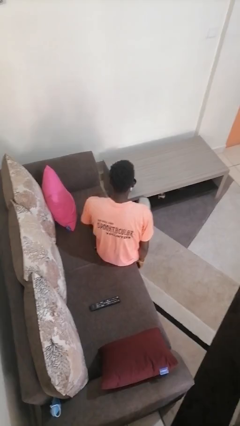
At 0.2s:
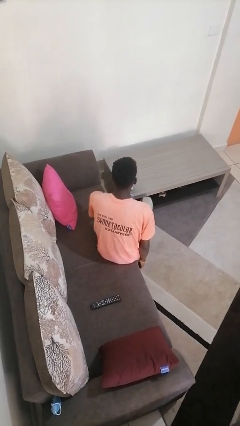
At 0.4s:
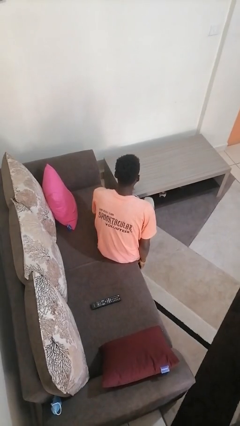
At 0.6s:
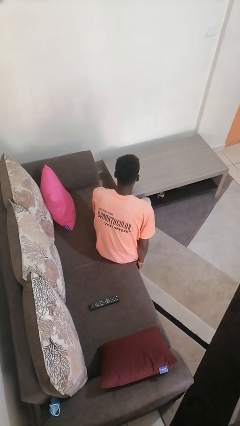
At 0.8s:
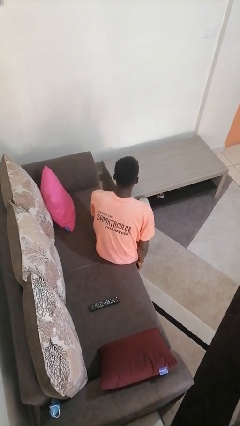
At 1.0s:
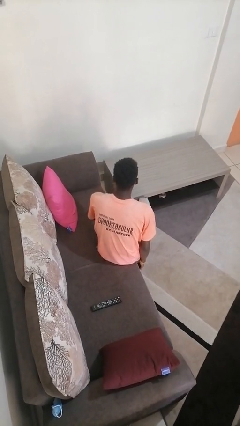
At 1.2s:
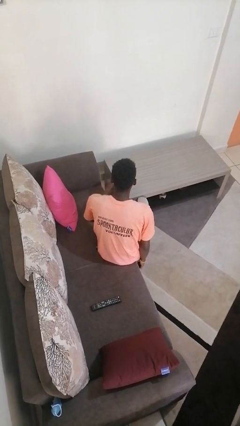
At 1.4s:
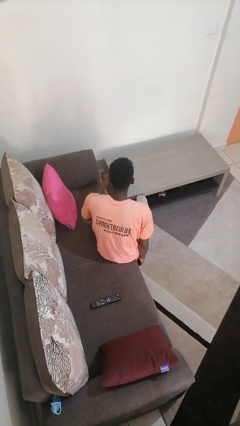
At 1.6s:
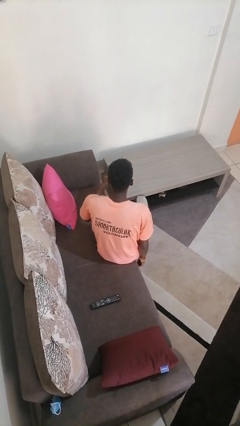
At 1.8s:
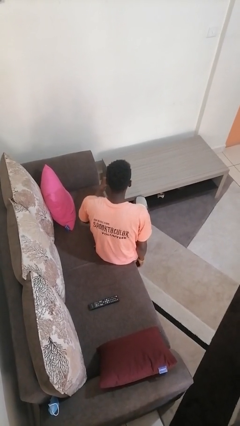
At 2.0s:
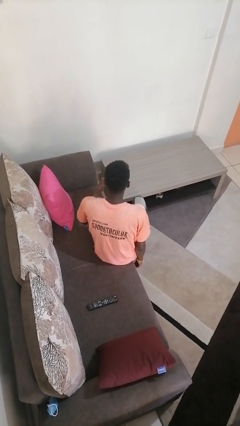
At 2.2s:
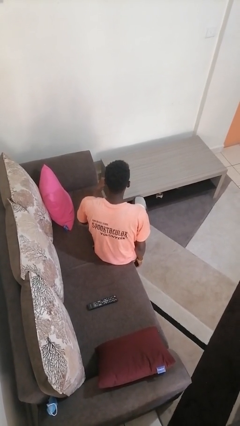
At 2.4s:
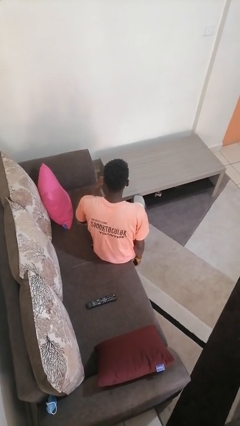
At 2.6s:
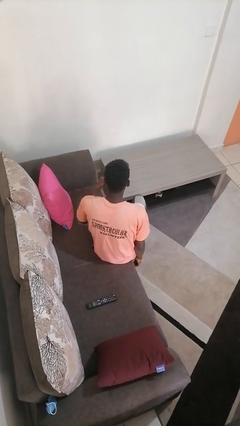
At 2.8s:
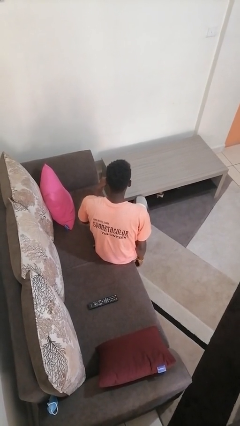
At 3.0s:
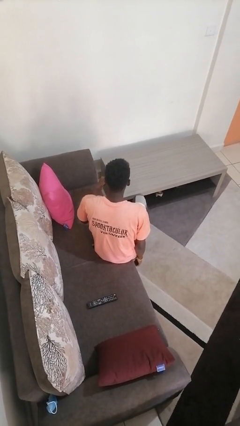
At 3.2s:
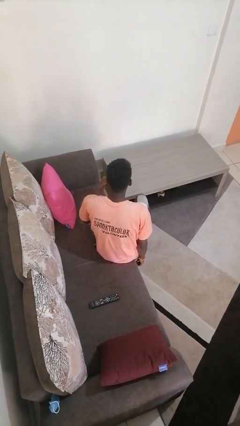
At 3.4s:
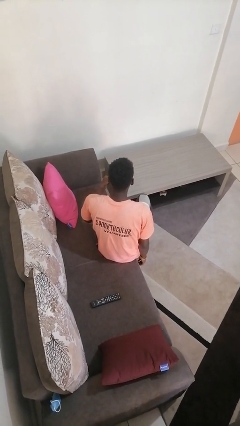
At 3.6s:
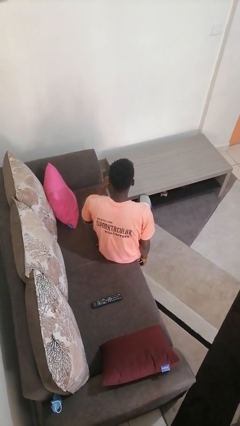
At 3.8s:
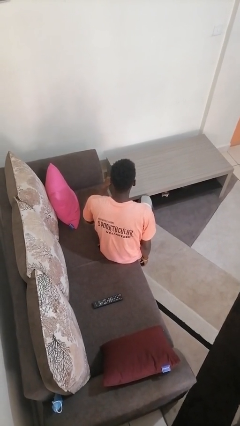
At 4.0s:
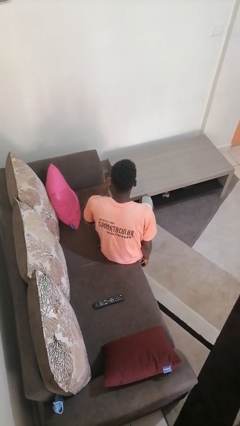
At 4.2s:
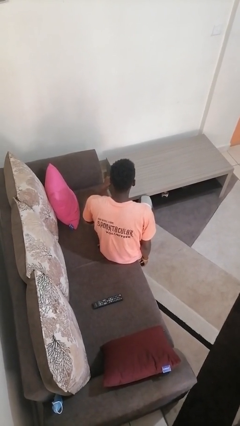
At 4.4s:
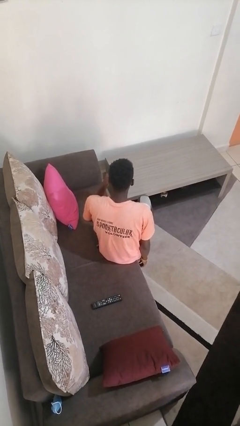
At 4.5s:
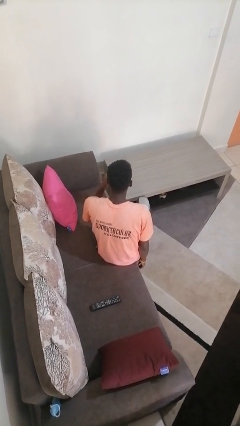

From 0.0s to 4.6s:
person picks up object from table

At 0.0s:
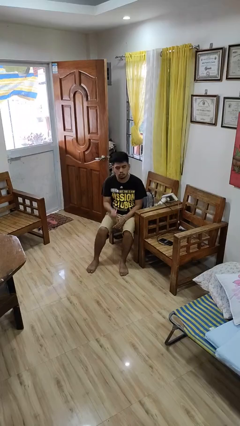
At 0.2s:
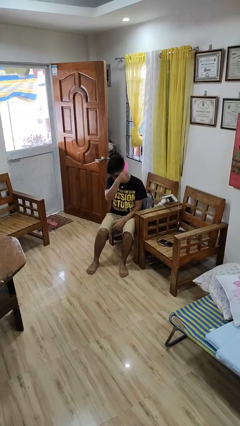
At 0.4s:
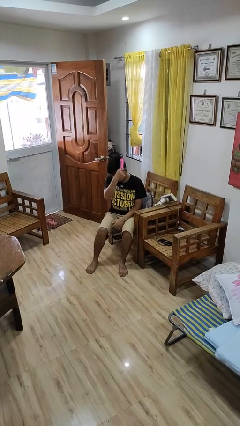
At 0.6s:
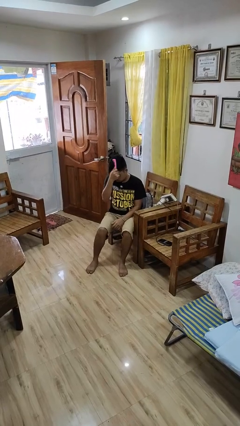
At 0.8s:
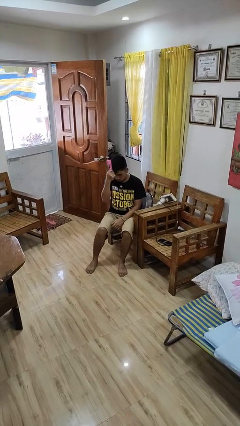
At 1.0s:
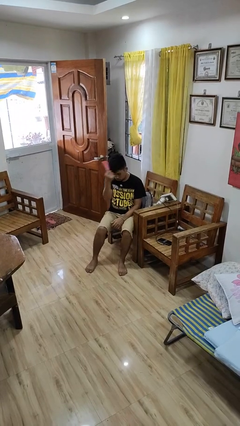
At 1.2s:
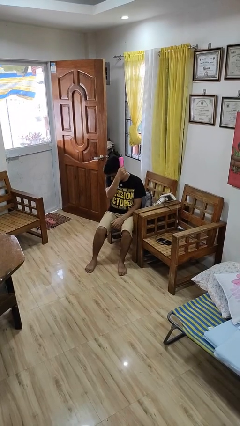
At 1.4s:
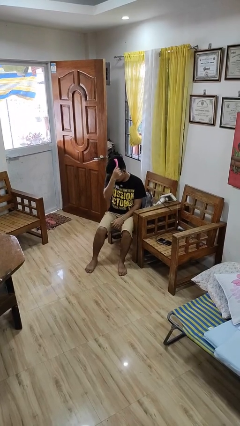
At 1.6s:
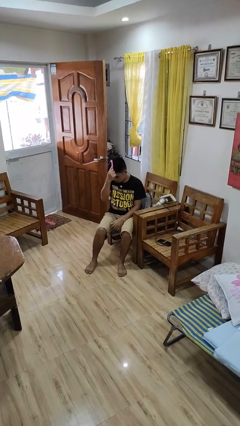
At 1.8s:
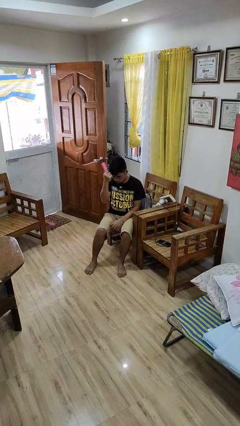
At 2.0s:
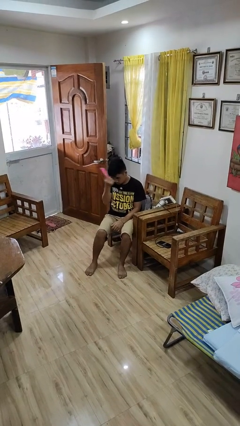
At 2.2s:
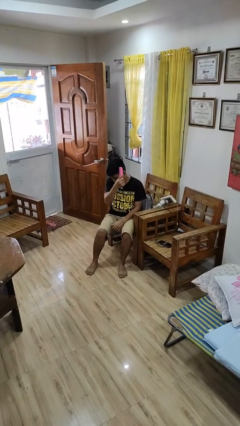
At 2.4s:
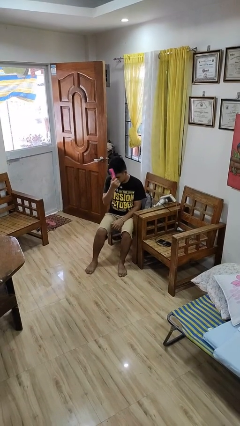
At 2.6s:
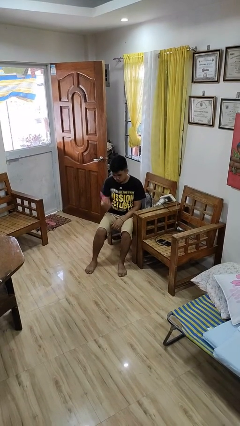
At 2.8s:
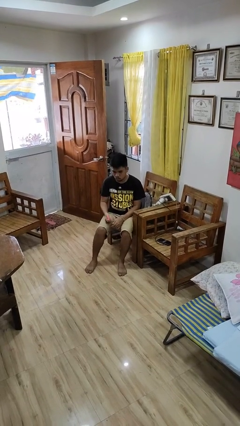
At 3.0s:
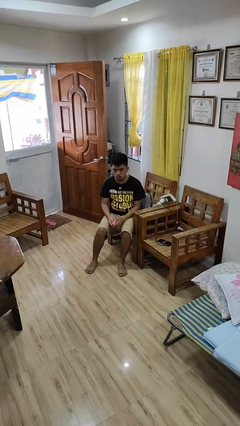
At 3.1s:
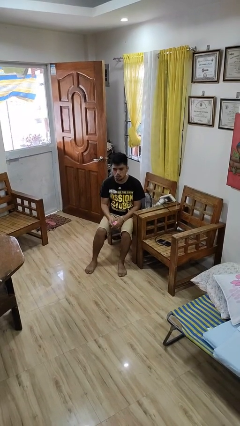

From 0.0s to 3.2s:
person brushes hair

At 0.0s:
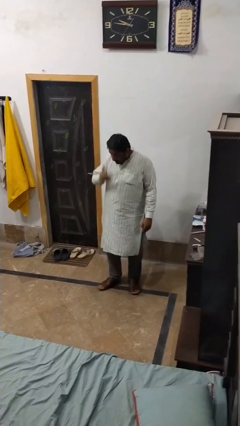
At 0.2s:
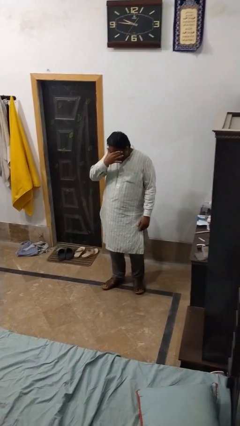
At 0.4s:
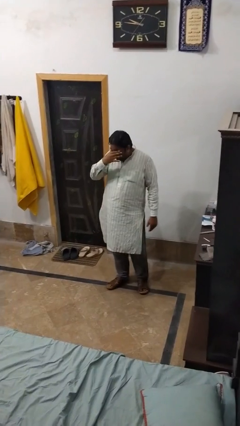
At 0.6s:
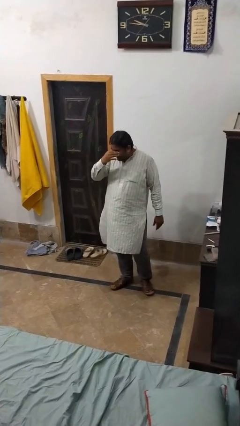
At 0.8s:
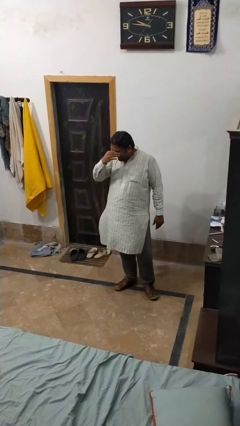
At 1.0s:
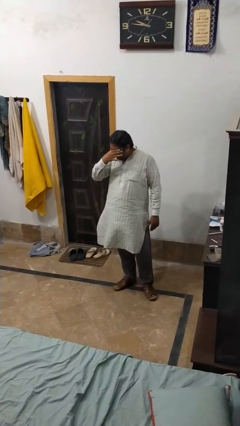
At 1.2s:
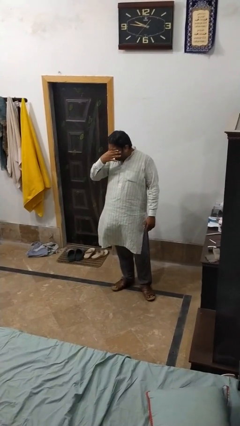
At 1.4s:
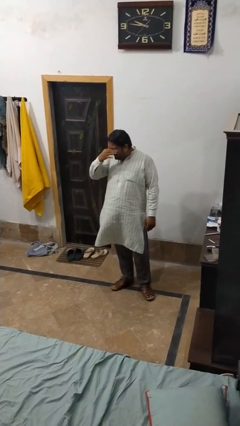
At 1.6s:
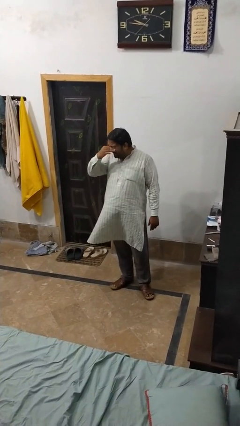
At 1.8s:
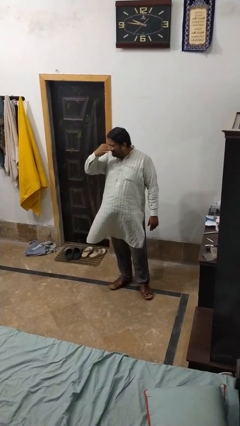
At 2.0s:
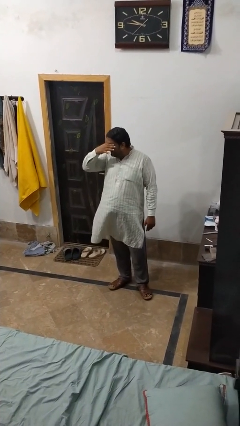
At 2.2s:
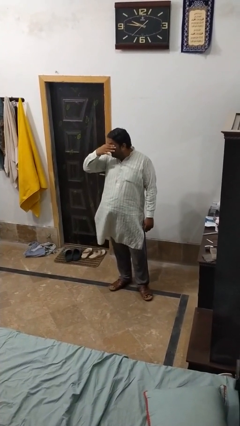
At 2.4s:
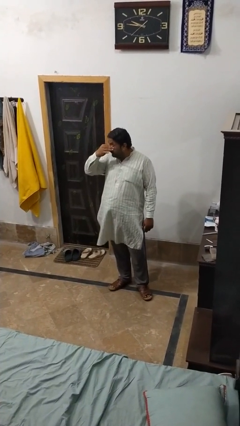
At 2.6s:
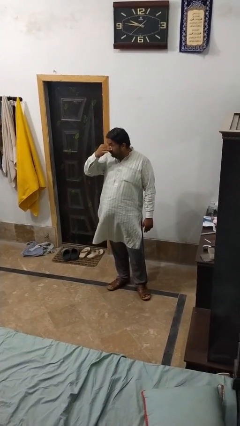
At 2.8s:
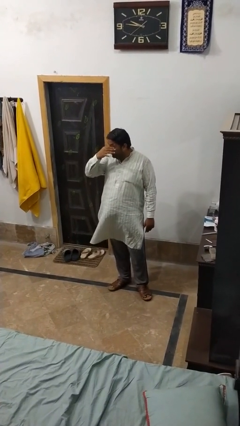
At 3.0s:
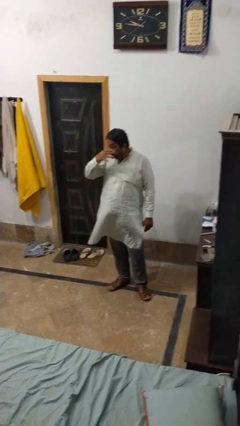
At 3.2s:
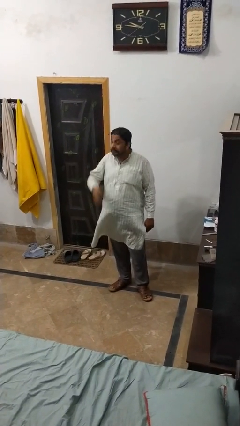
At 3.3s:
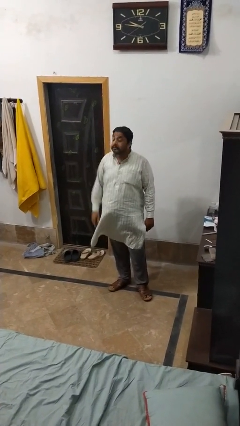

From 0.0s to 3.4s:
person rubs eyes

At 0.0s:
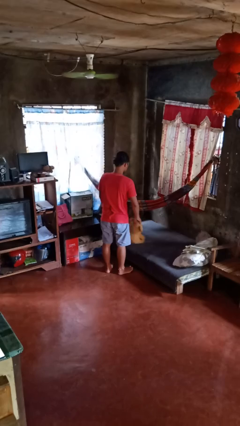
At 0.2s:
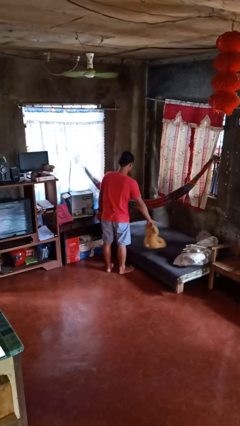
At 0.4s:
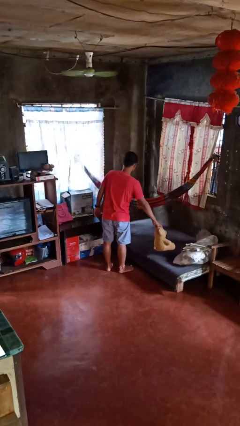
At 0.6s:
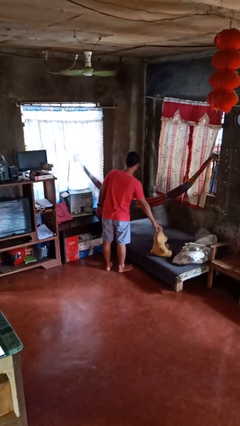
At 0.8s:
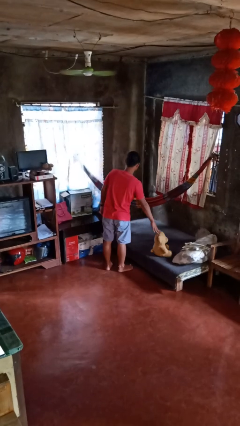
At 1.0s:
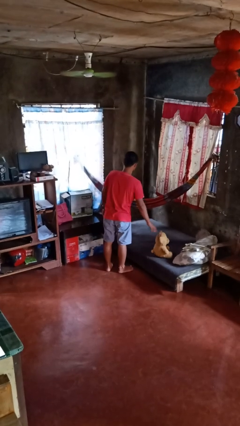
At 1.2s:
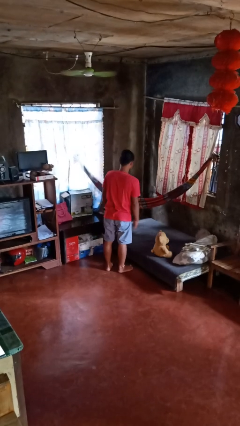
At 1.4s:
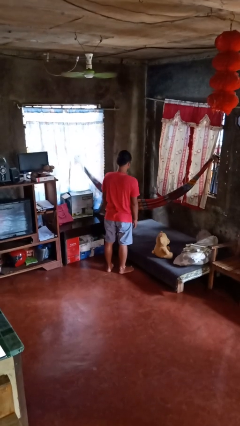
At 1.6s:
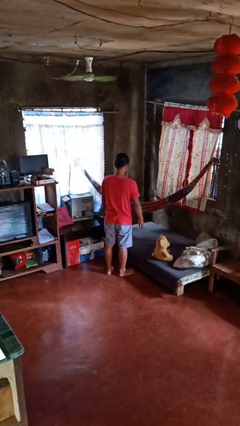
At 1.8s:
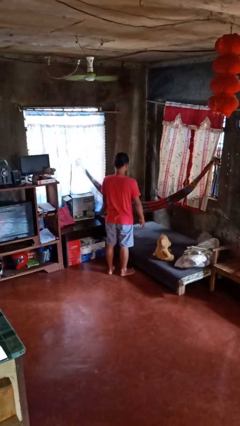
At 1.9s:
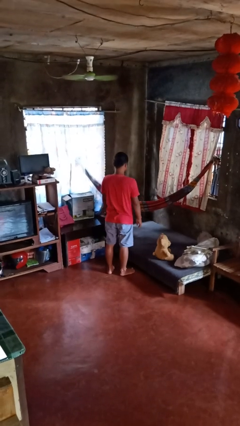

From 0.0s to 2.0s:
person puts down object on bed

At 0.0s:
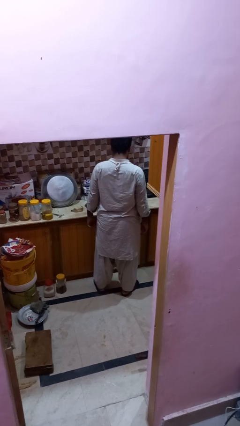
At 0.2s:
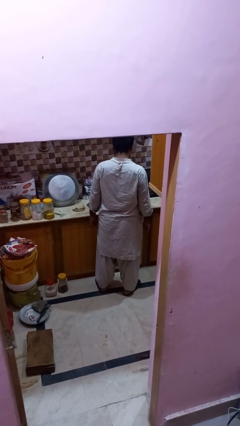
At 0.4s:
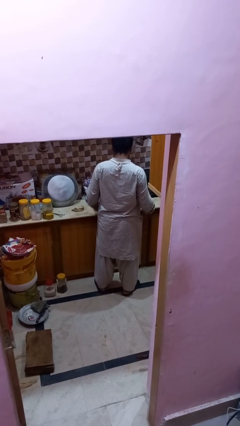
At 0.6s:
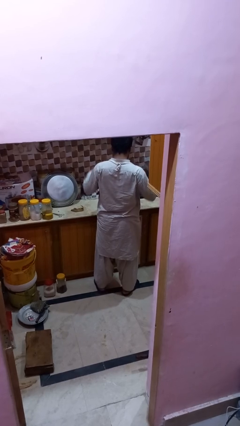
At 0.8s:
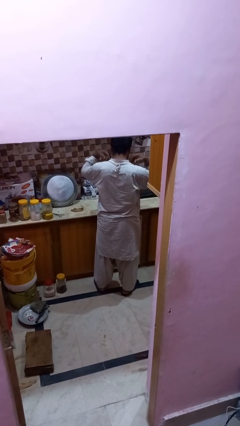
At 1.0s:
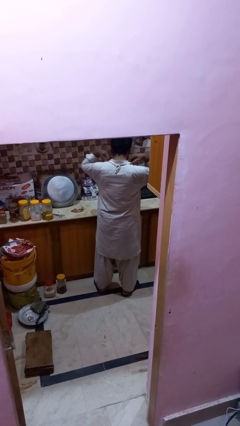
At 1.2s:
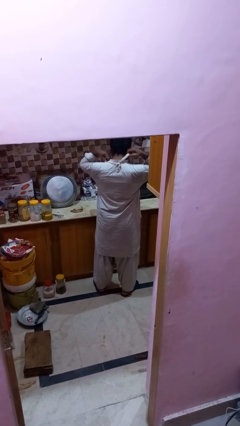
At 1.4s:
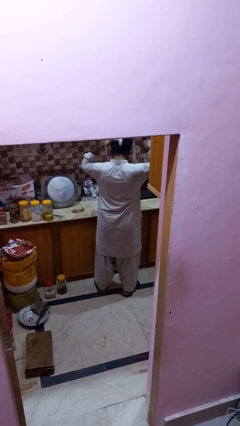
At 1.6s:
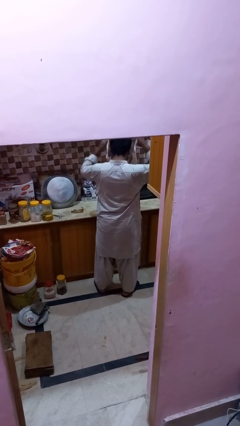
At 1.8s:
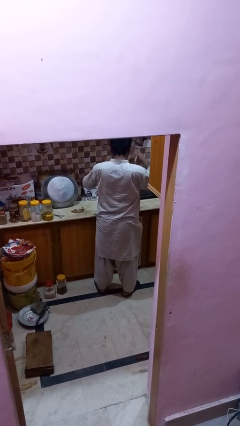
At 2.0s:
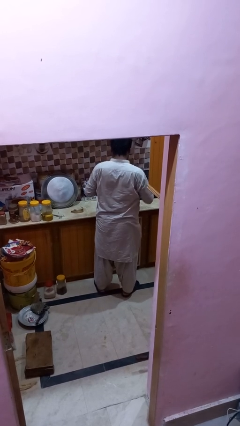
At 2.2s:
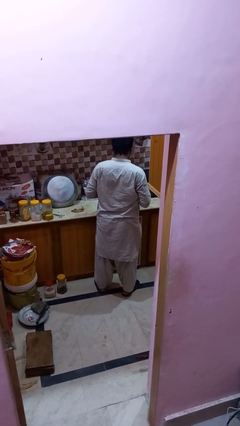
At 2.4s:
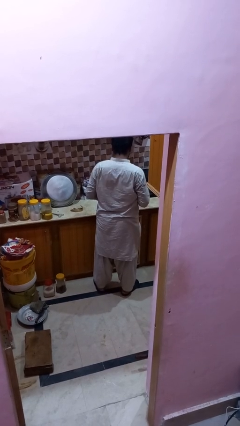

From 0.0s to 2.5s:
person takes off apron

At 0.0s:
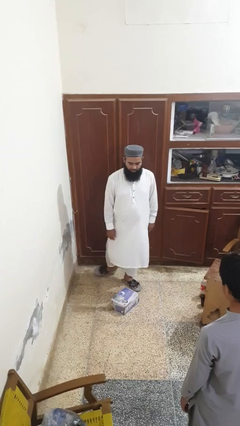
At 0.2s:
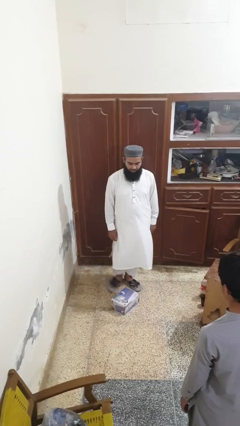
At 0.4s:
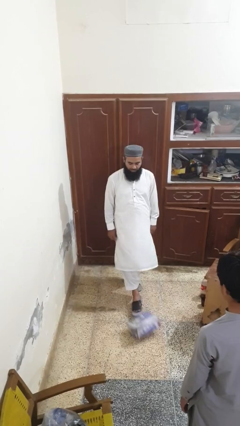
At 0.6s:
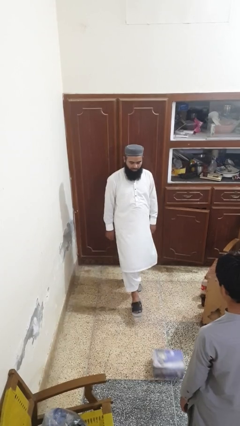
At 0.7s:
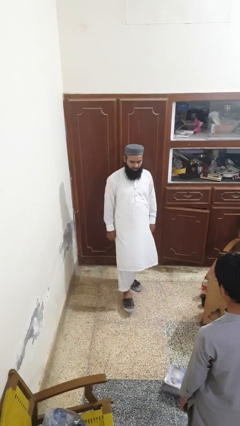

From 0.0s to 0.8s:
person kicks object to person

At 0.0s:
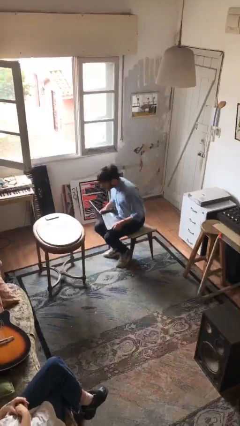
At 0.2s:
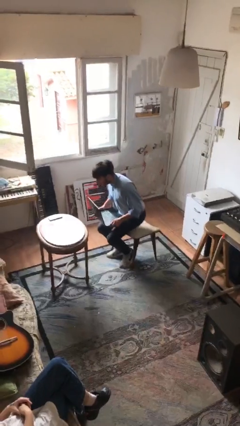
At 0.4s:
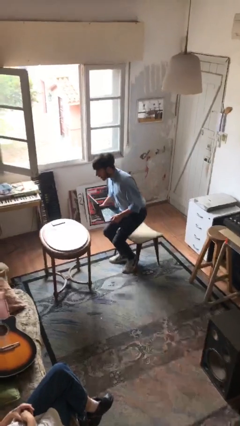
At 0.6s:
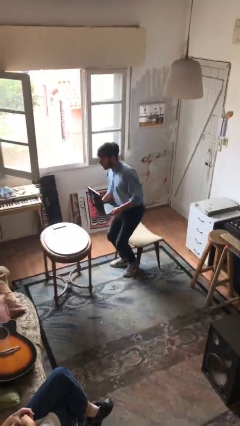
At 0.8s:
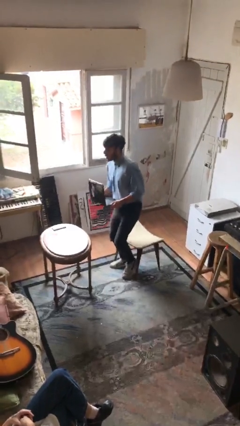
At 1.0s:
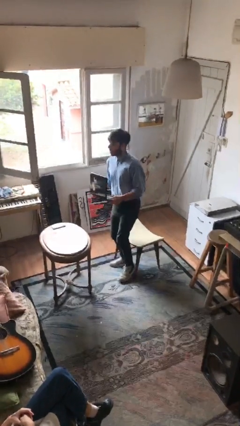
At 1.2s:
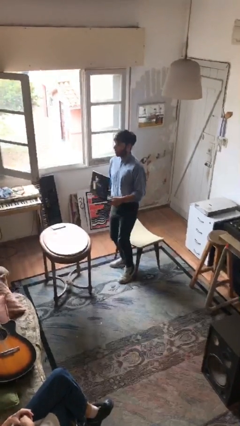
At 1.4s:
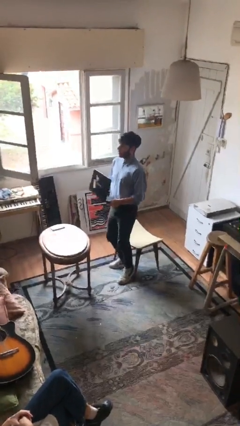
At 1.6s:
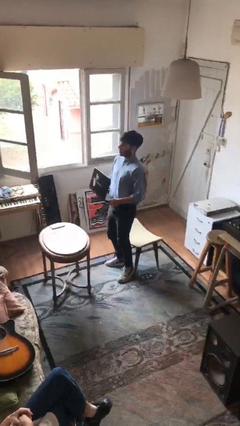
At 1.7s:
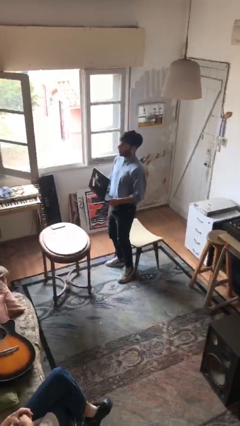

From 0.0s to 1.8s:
person stands up
